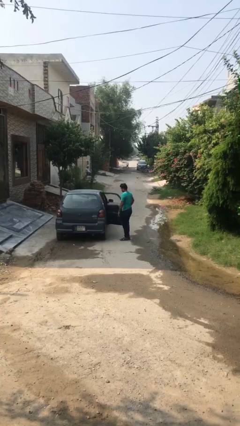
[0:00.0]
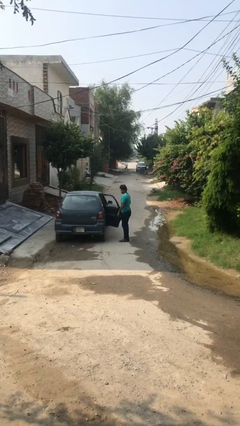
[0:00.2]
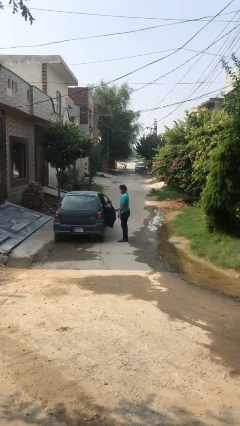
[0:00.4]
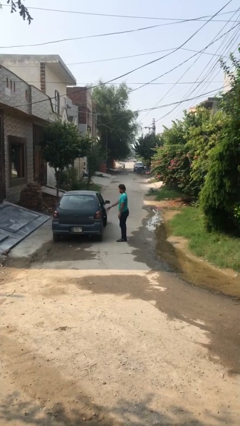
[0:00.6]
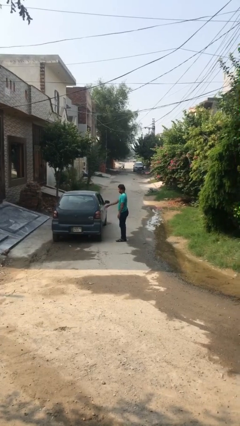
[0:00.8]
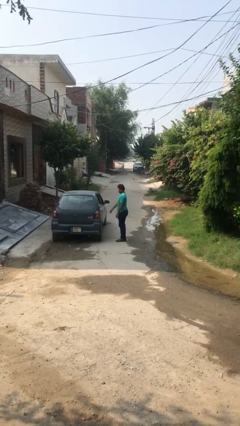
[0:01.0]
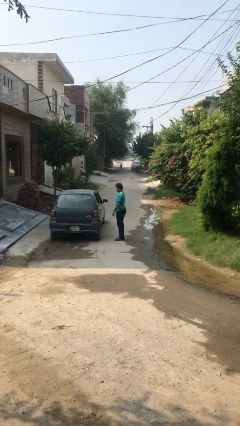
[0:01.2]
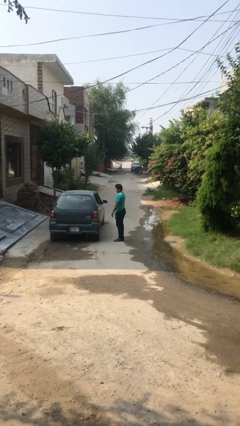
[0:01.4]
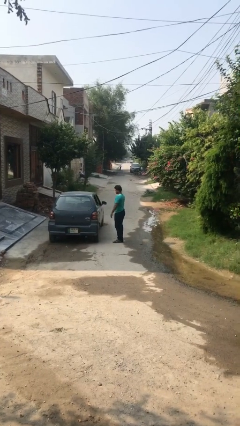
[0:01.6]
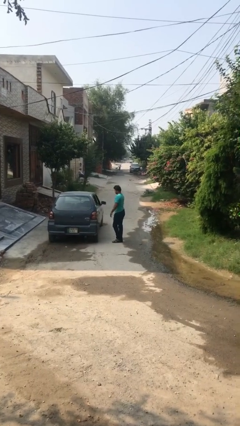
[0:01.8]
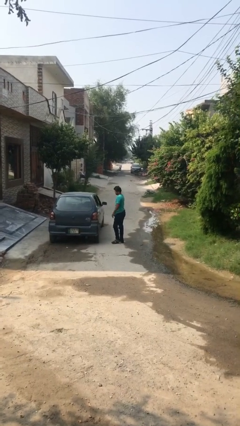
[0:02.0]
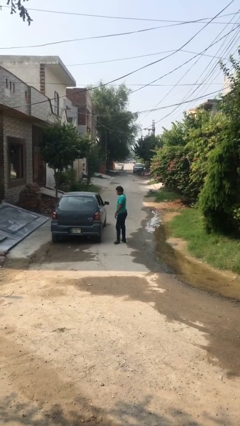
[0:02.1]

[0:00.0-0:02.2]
person closes car door

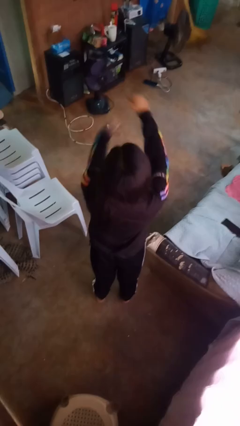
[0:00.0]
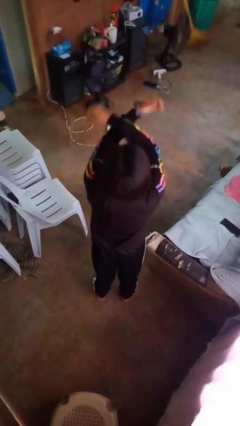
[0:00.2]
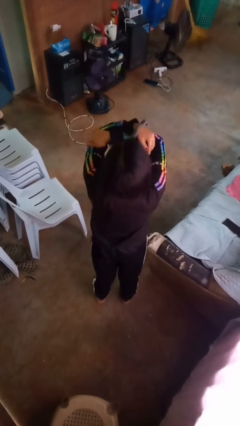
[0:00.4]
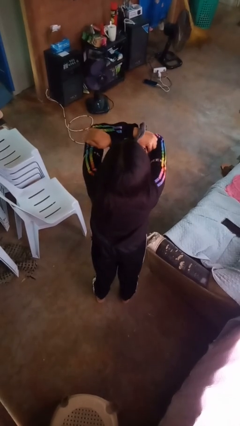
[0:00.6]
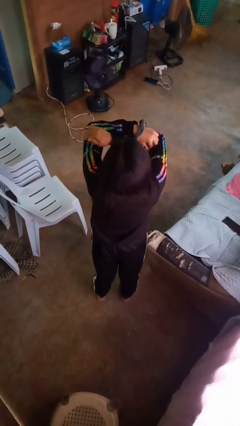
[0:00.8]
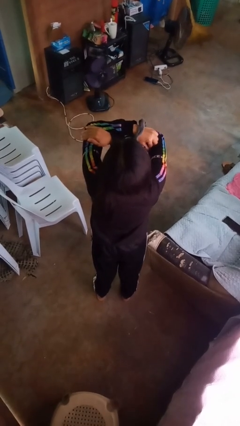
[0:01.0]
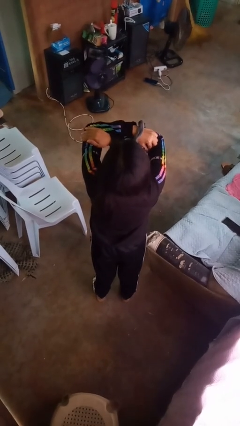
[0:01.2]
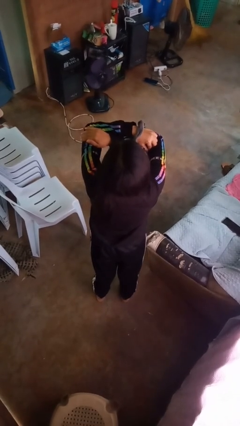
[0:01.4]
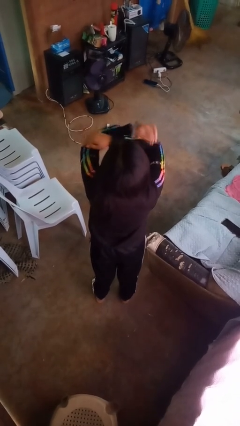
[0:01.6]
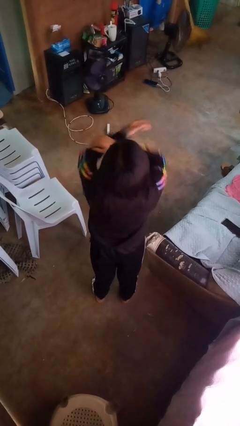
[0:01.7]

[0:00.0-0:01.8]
person gestures arms x

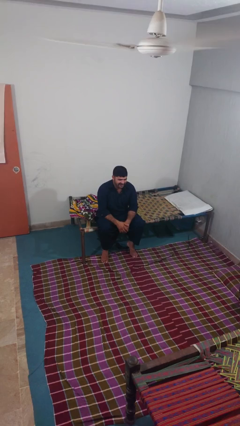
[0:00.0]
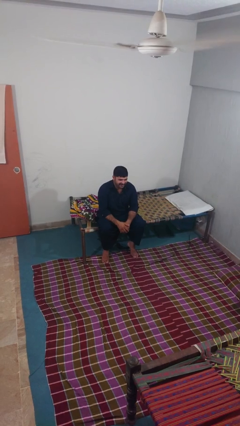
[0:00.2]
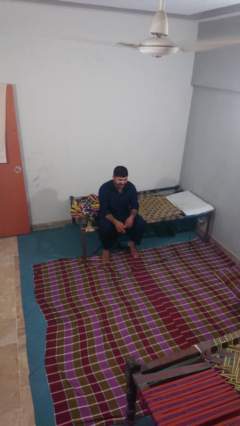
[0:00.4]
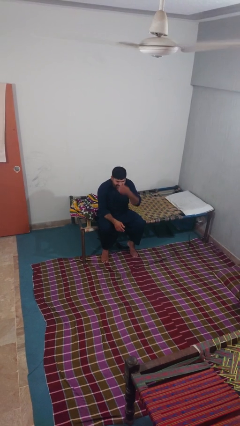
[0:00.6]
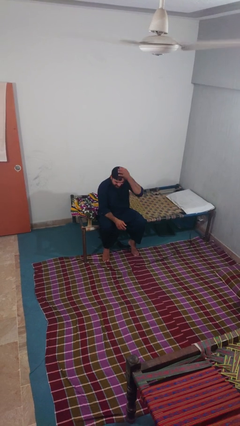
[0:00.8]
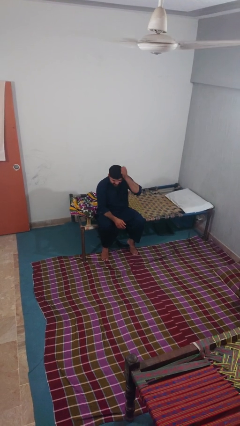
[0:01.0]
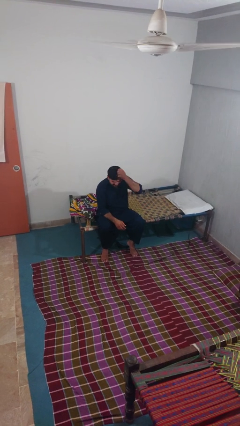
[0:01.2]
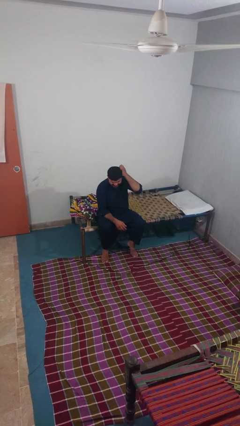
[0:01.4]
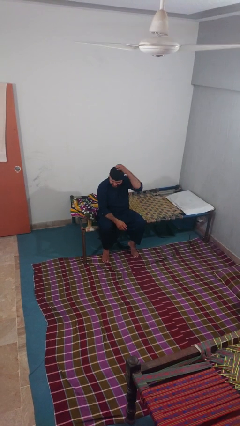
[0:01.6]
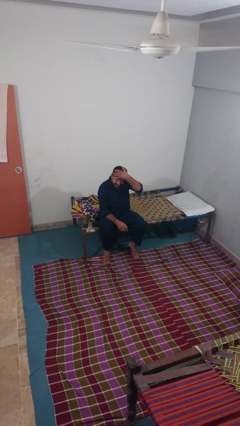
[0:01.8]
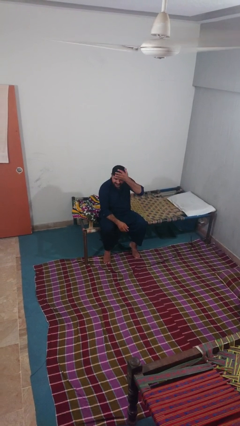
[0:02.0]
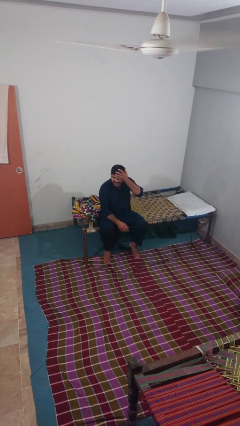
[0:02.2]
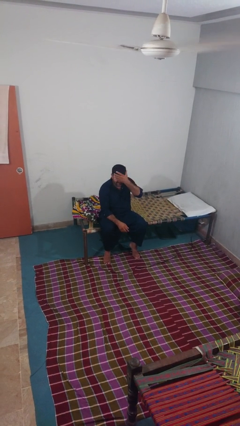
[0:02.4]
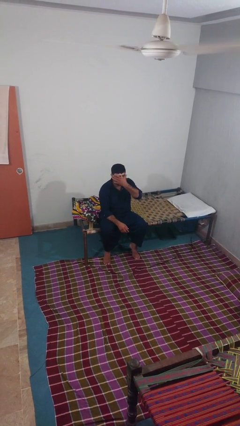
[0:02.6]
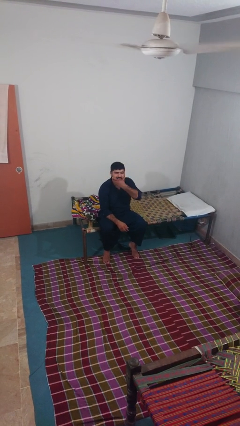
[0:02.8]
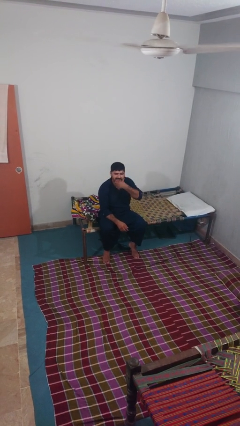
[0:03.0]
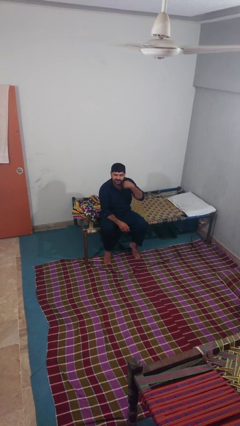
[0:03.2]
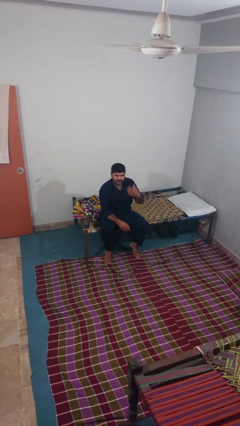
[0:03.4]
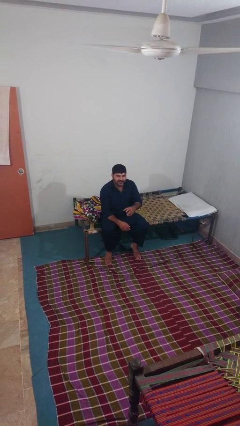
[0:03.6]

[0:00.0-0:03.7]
person scratches face

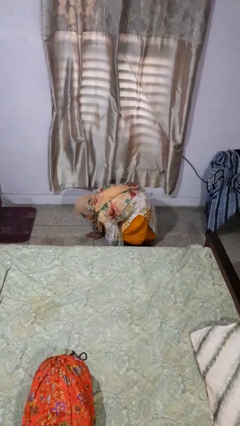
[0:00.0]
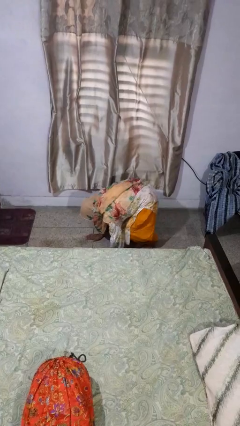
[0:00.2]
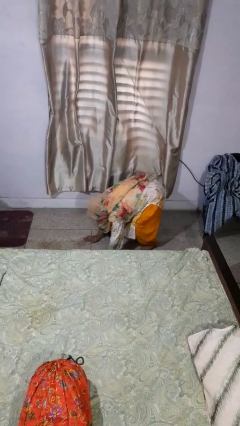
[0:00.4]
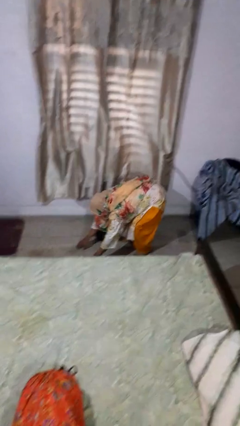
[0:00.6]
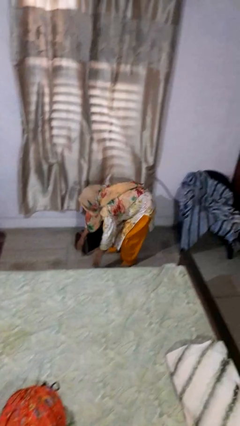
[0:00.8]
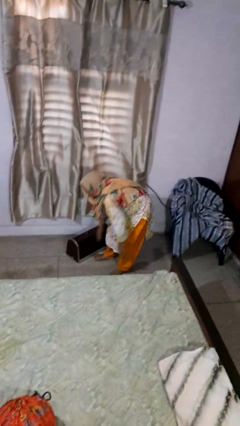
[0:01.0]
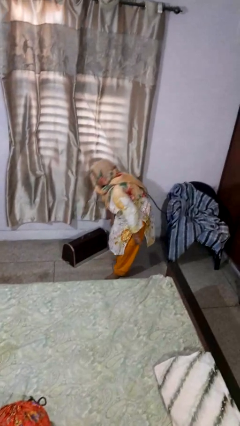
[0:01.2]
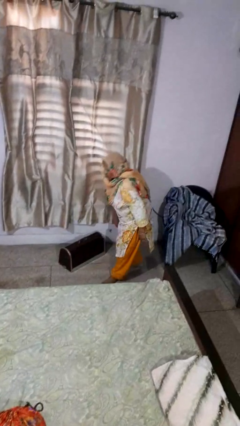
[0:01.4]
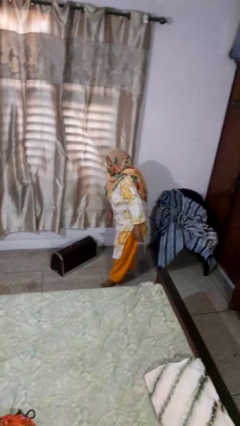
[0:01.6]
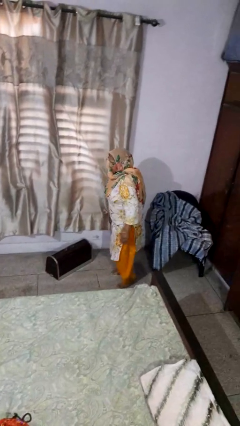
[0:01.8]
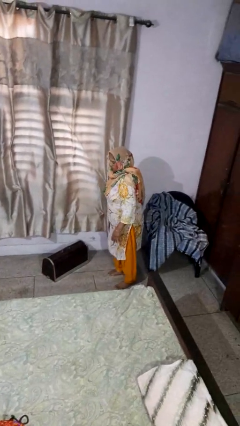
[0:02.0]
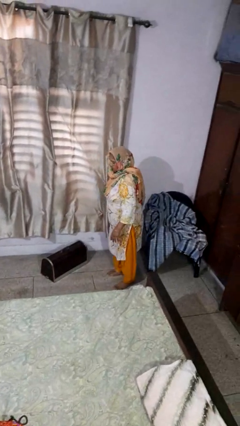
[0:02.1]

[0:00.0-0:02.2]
person stands up from floor

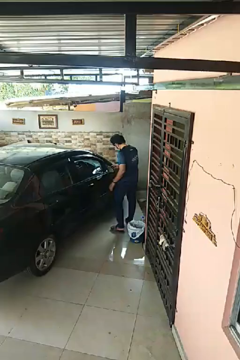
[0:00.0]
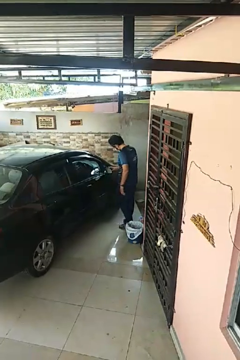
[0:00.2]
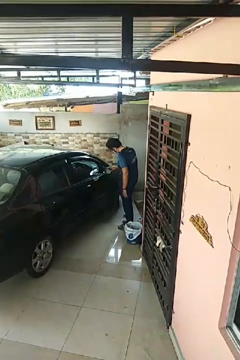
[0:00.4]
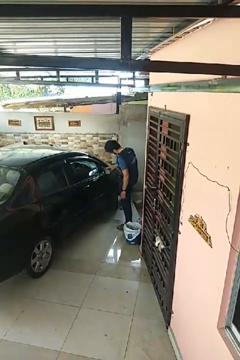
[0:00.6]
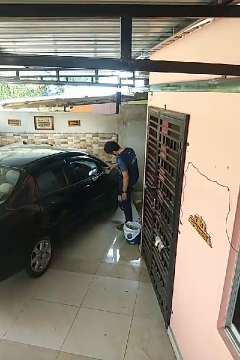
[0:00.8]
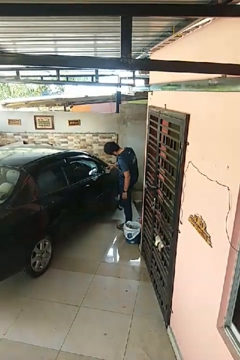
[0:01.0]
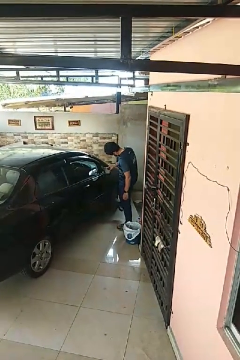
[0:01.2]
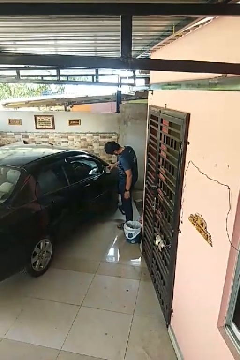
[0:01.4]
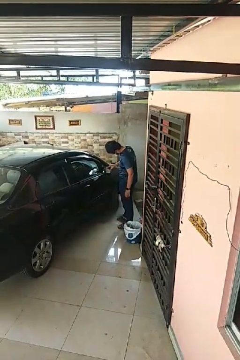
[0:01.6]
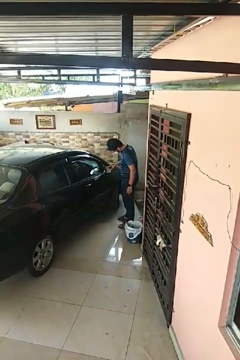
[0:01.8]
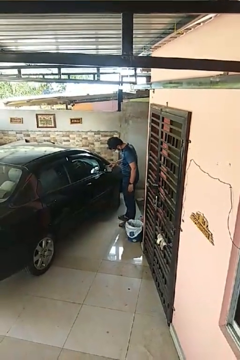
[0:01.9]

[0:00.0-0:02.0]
person kicks car tires

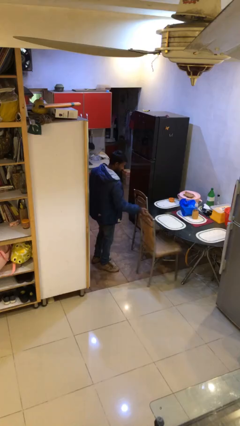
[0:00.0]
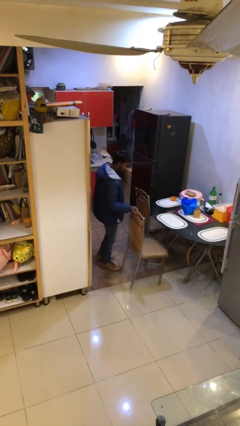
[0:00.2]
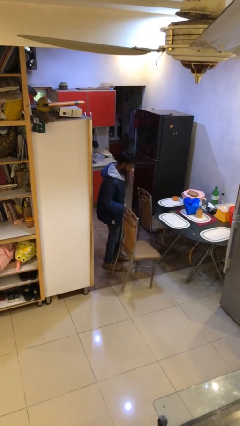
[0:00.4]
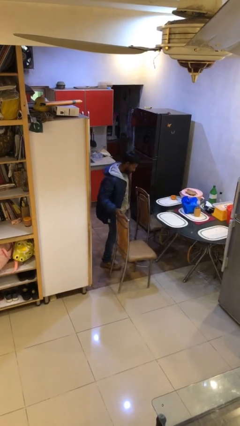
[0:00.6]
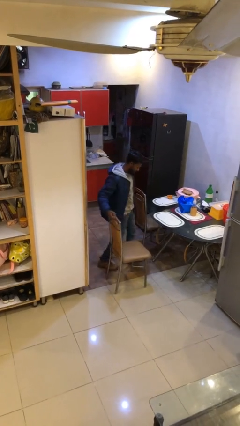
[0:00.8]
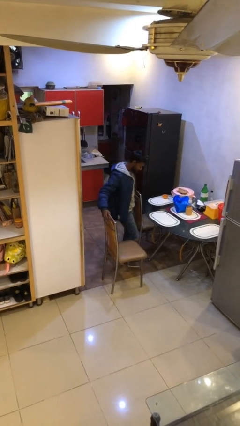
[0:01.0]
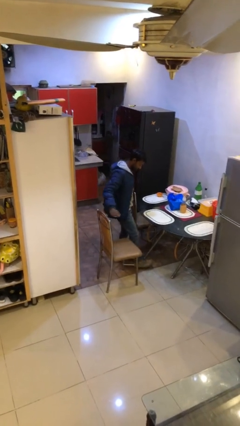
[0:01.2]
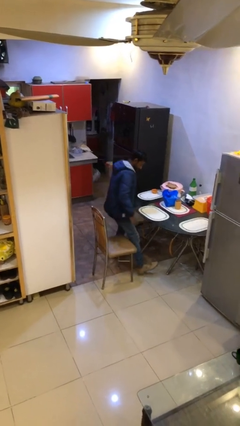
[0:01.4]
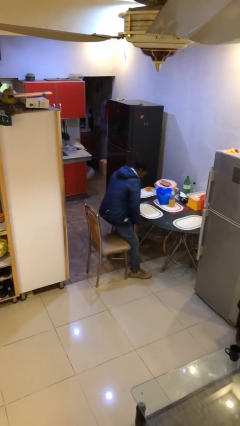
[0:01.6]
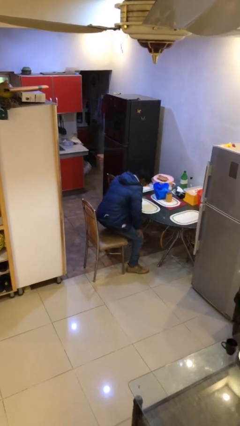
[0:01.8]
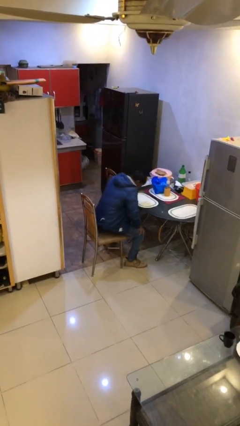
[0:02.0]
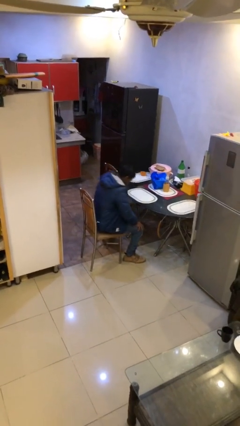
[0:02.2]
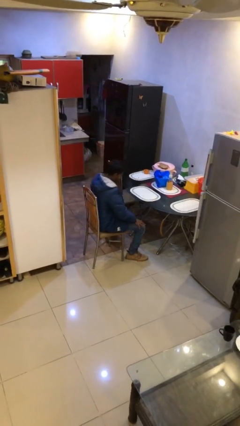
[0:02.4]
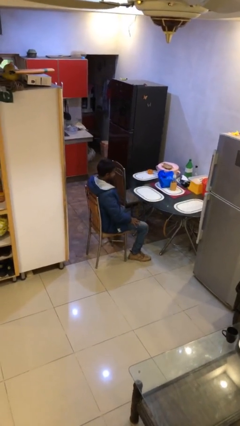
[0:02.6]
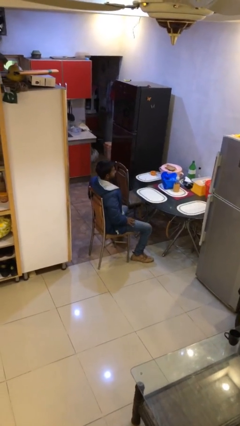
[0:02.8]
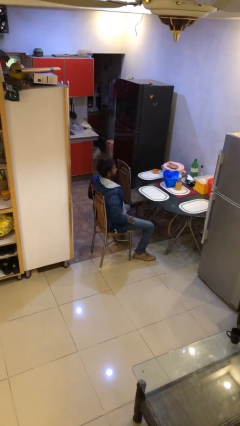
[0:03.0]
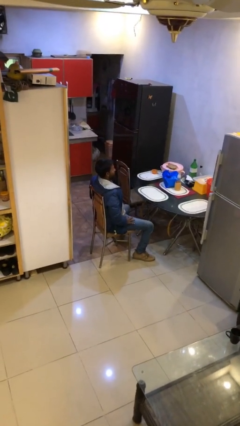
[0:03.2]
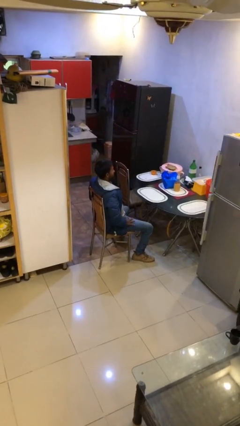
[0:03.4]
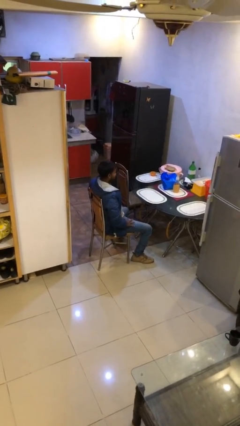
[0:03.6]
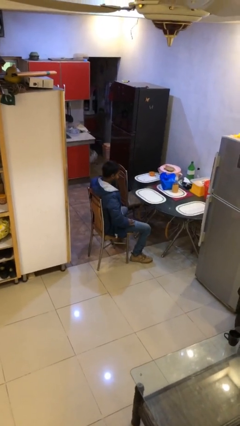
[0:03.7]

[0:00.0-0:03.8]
person sits down

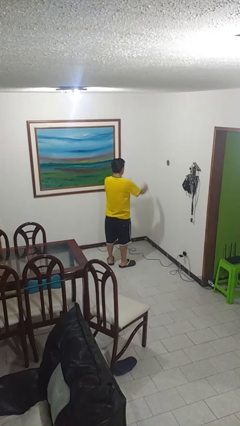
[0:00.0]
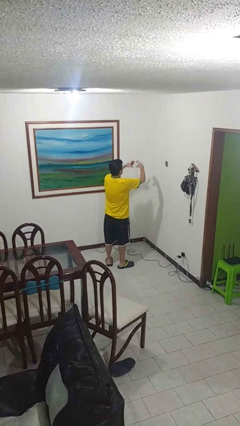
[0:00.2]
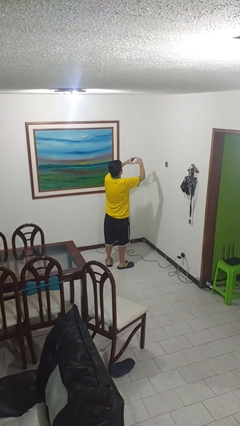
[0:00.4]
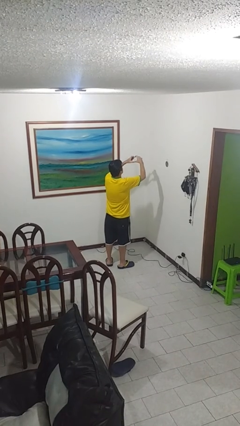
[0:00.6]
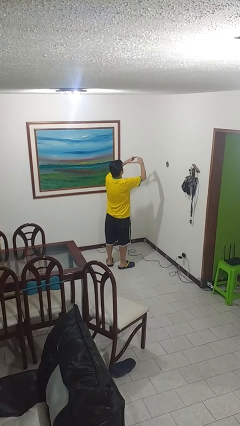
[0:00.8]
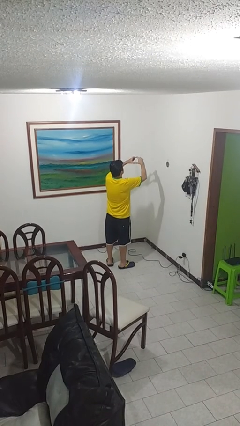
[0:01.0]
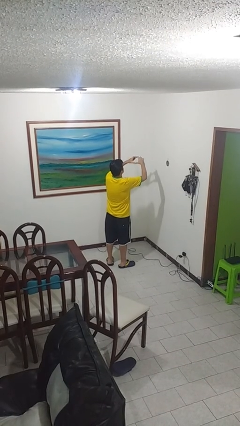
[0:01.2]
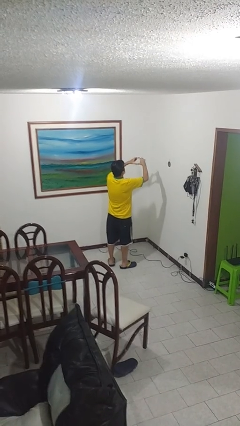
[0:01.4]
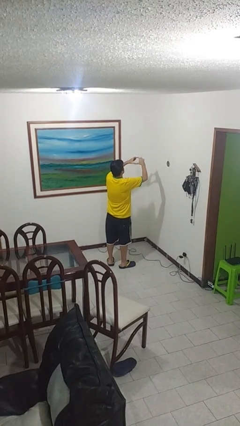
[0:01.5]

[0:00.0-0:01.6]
person gestures heart
